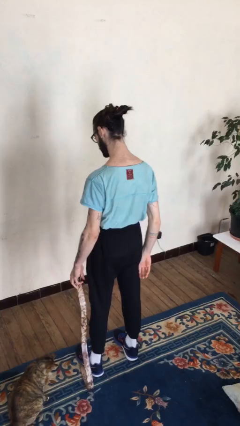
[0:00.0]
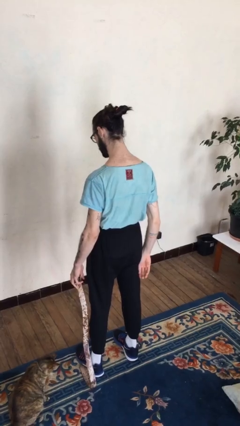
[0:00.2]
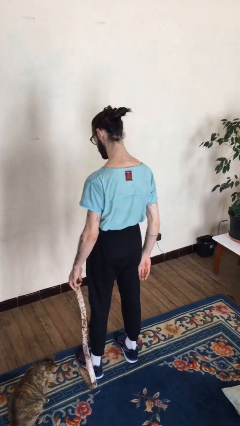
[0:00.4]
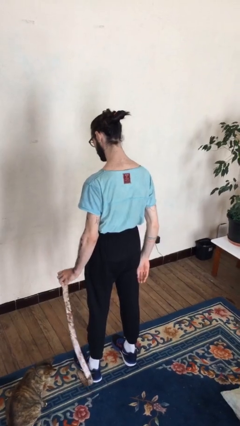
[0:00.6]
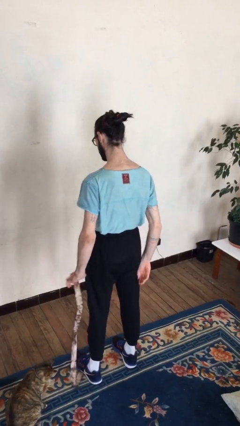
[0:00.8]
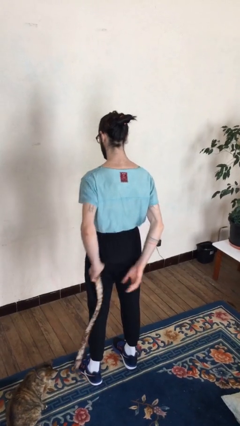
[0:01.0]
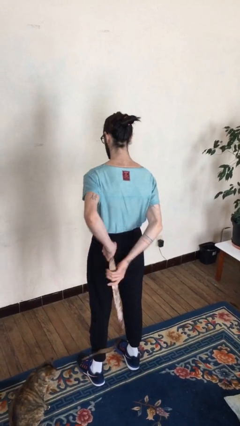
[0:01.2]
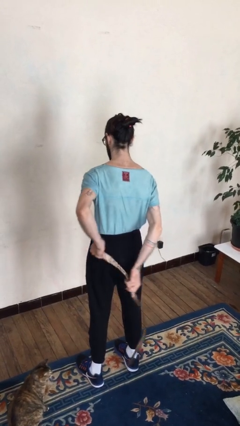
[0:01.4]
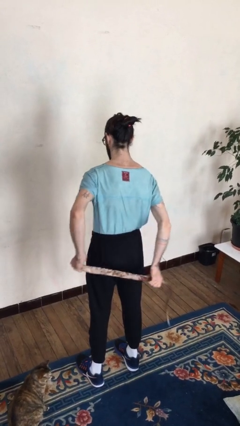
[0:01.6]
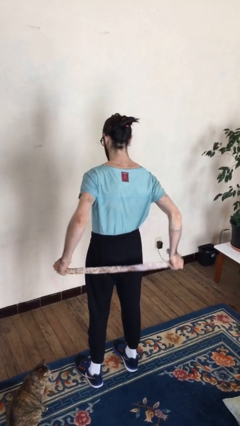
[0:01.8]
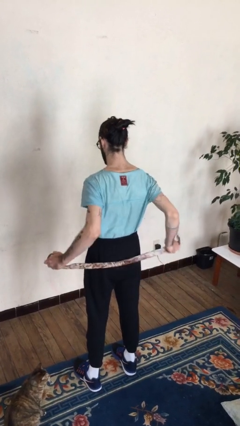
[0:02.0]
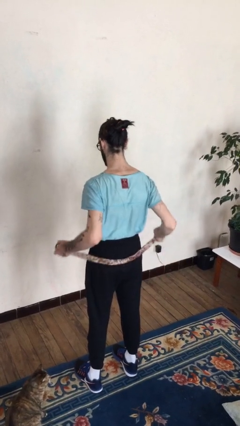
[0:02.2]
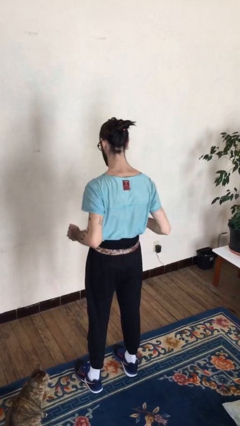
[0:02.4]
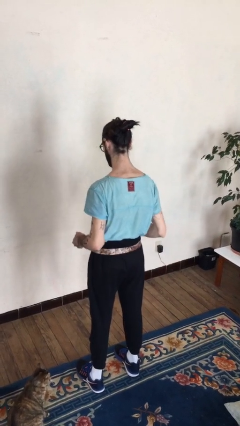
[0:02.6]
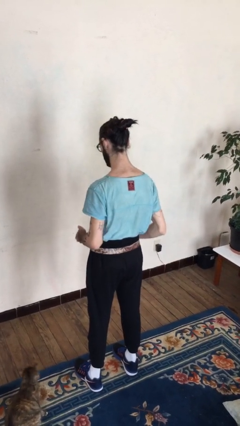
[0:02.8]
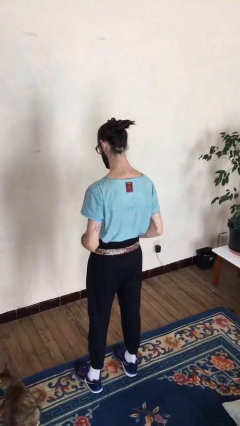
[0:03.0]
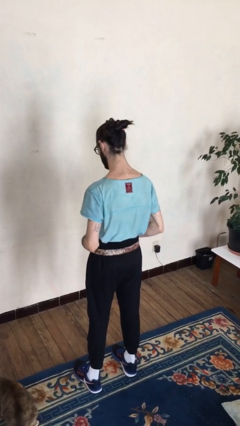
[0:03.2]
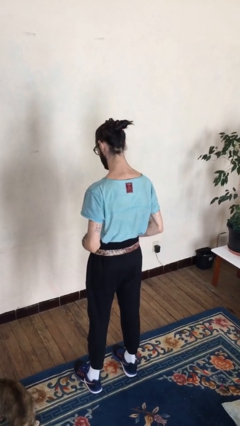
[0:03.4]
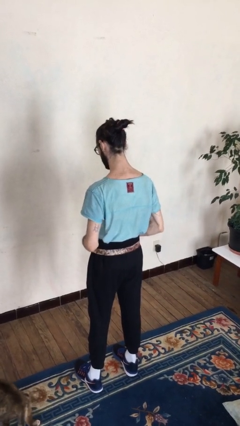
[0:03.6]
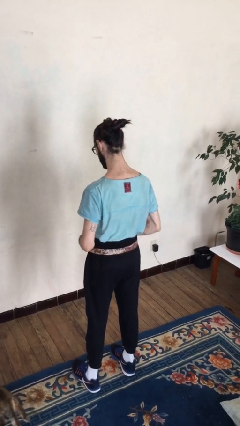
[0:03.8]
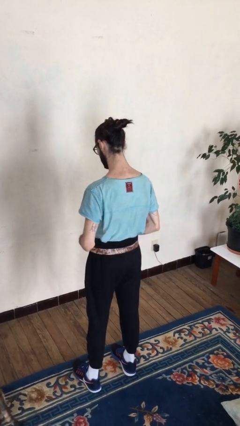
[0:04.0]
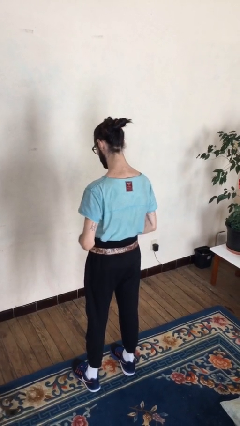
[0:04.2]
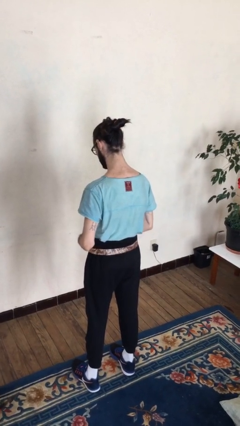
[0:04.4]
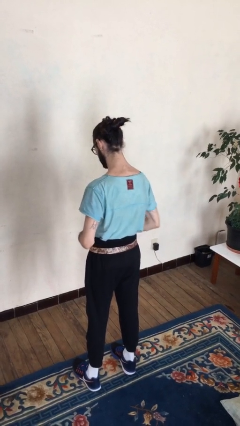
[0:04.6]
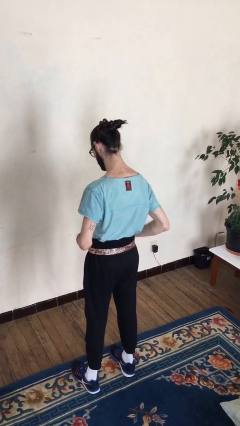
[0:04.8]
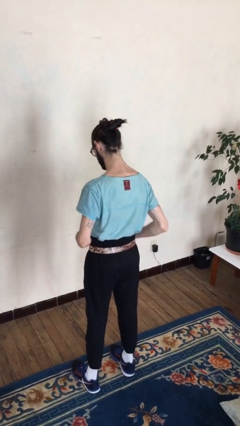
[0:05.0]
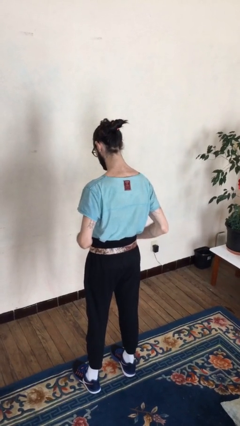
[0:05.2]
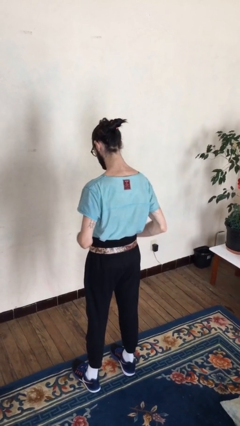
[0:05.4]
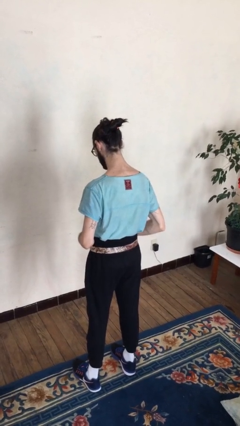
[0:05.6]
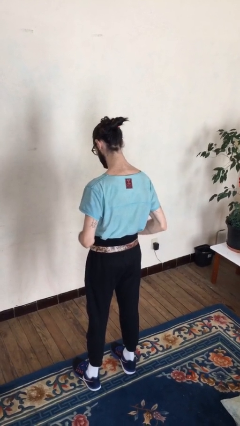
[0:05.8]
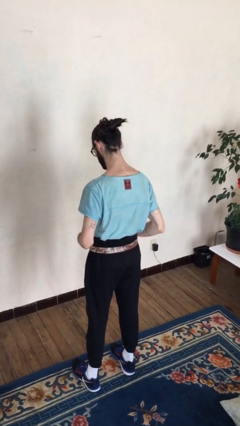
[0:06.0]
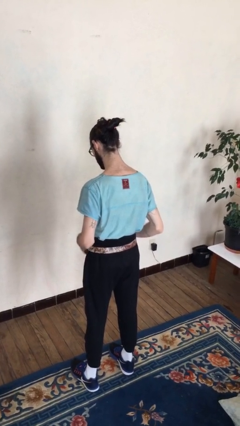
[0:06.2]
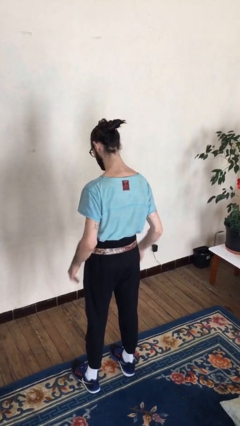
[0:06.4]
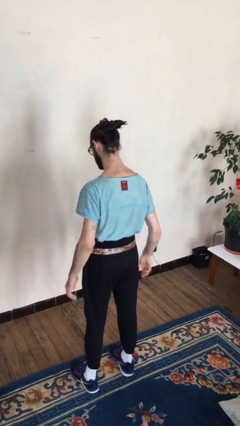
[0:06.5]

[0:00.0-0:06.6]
person puts on belt

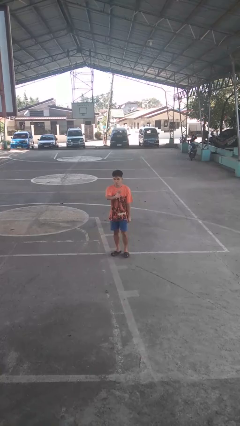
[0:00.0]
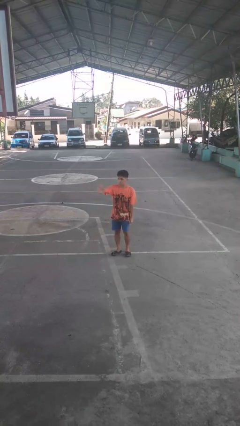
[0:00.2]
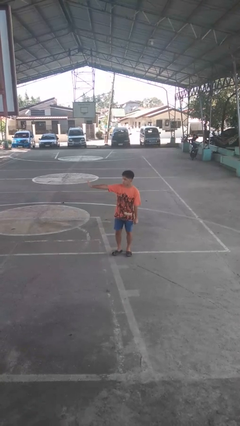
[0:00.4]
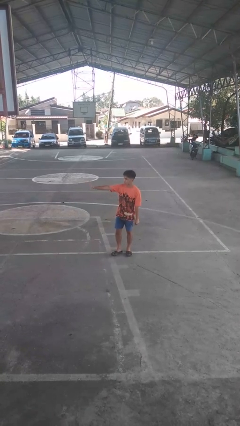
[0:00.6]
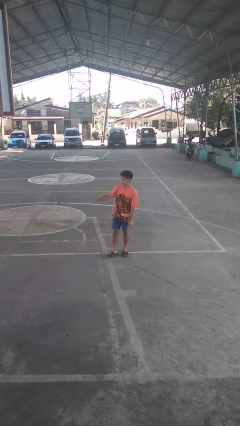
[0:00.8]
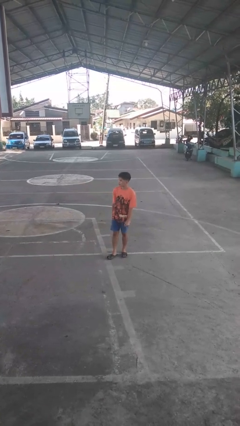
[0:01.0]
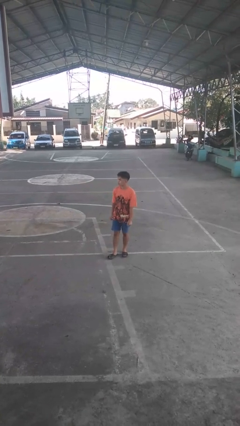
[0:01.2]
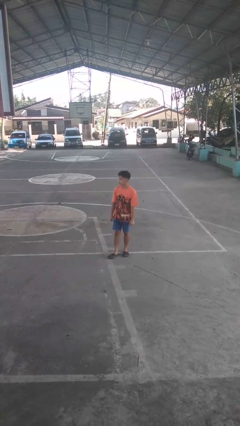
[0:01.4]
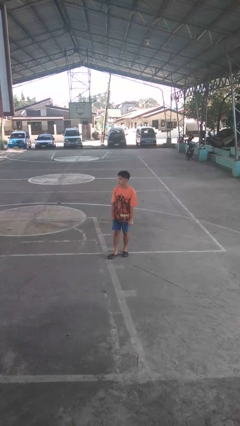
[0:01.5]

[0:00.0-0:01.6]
person gestures swipe right

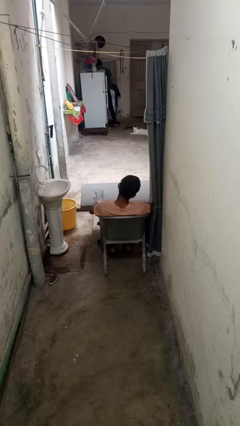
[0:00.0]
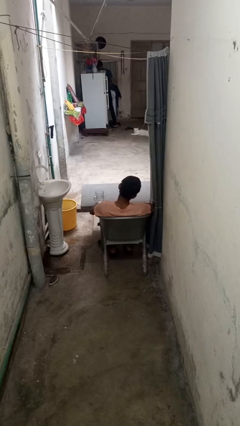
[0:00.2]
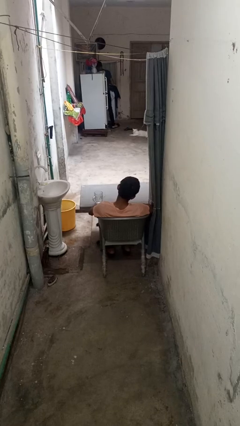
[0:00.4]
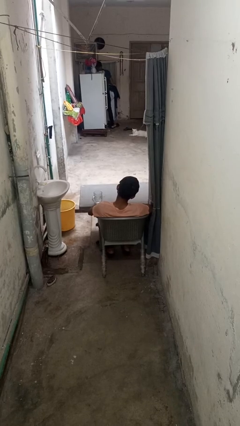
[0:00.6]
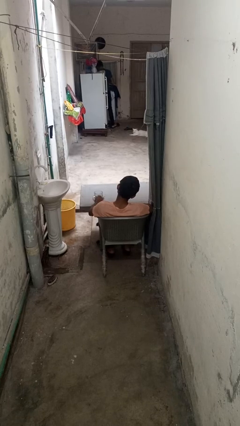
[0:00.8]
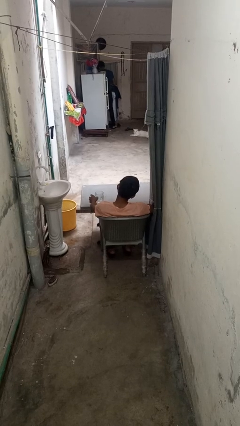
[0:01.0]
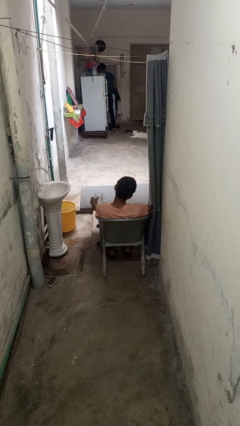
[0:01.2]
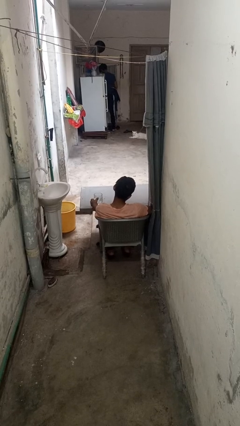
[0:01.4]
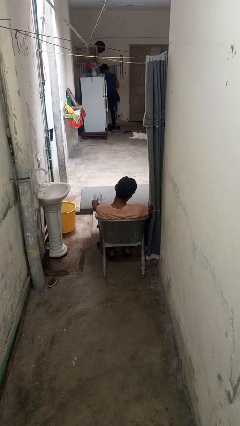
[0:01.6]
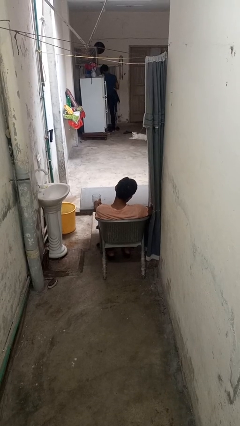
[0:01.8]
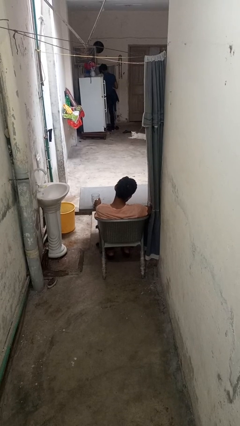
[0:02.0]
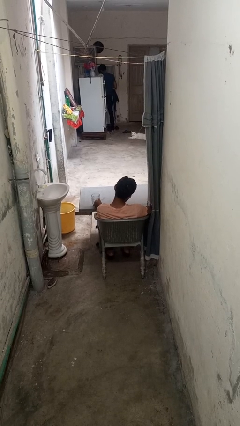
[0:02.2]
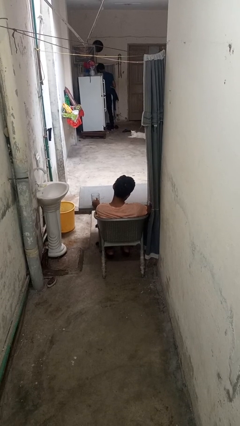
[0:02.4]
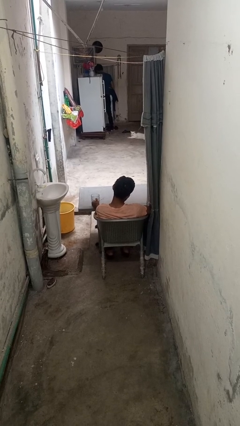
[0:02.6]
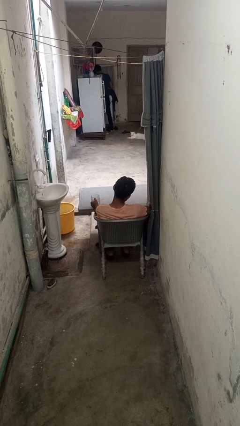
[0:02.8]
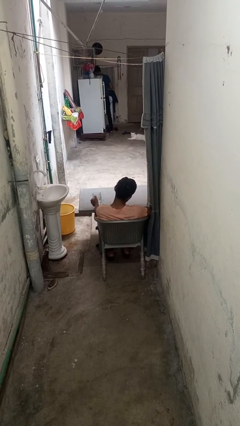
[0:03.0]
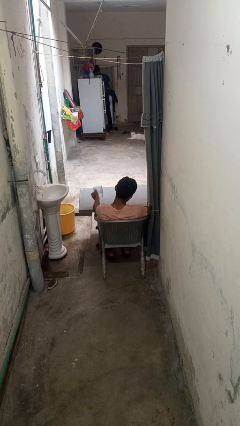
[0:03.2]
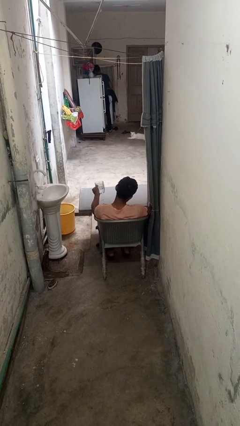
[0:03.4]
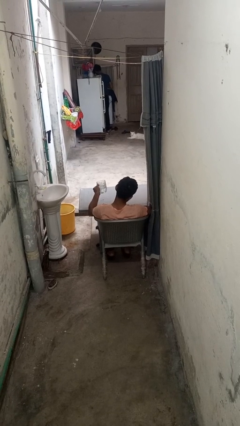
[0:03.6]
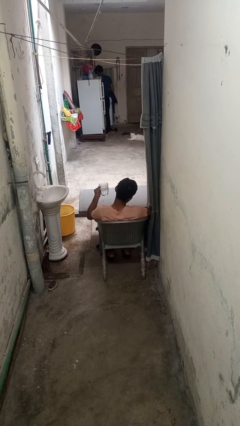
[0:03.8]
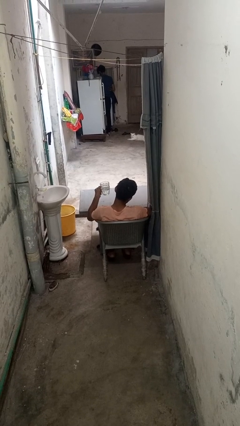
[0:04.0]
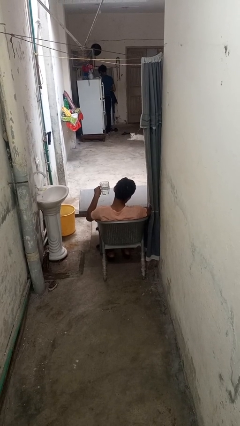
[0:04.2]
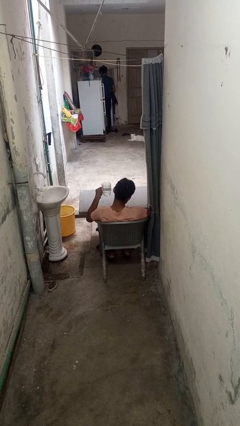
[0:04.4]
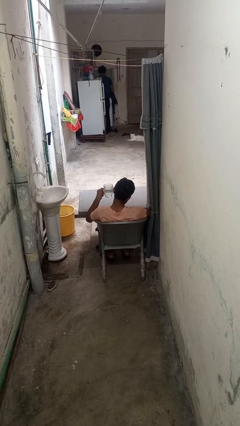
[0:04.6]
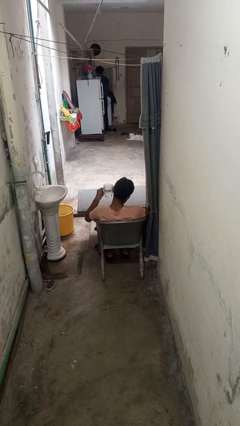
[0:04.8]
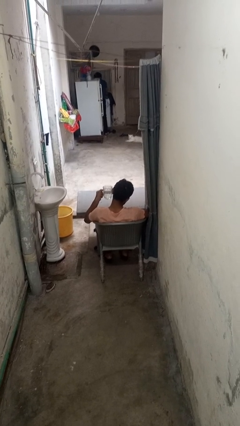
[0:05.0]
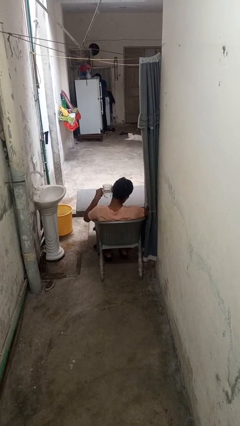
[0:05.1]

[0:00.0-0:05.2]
person picks up object from table

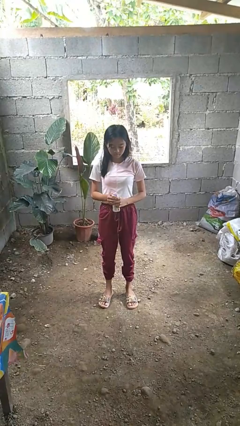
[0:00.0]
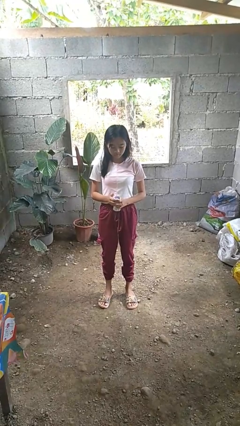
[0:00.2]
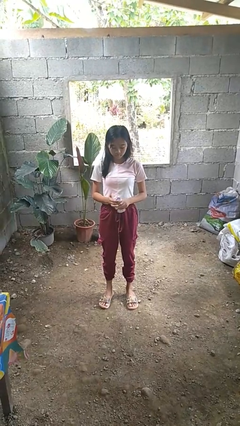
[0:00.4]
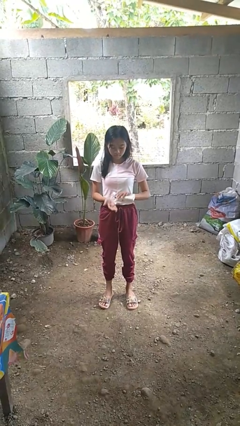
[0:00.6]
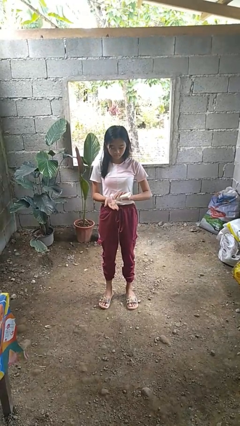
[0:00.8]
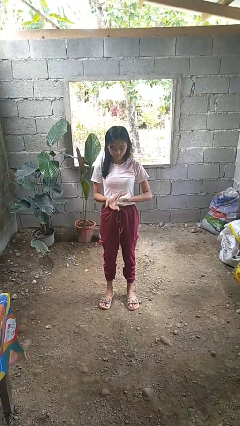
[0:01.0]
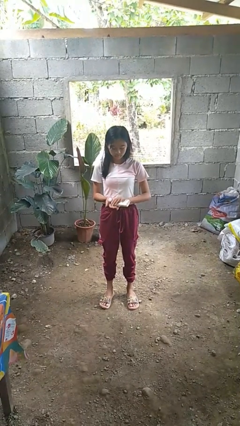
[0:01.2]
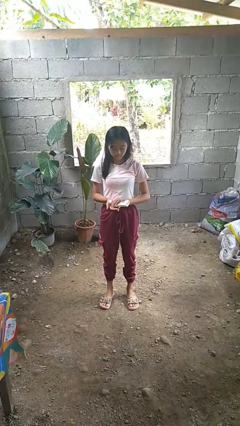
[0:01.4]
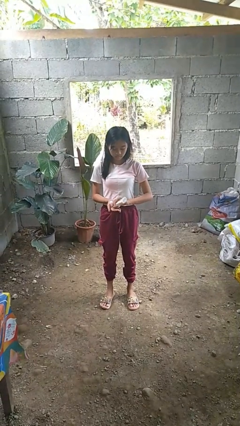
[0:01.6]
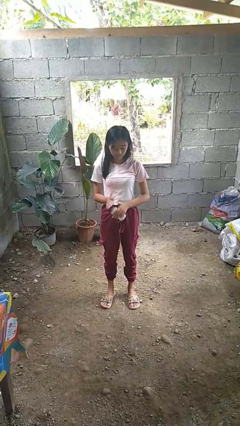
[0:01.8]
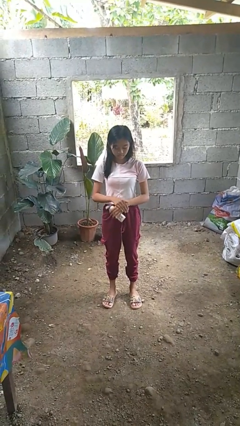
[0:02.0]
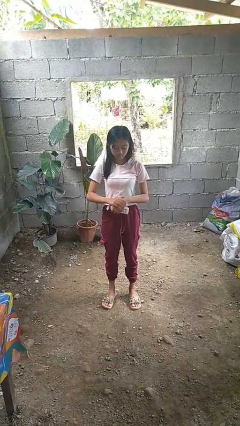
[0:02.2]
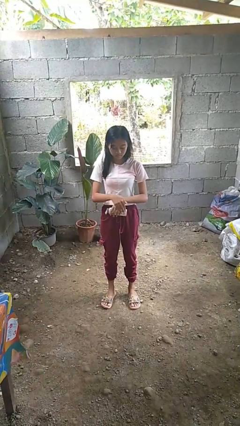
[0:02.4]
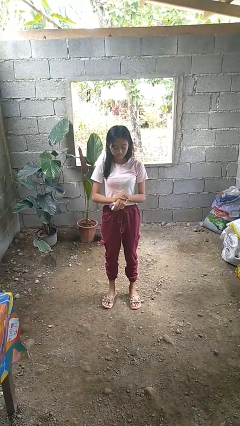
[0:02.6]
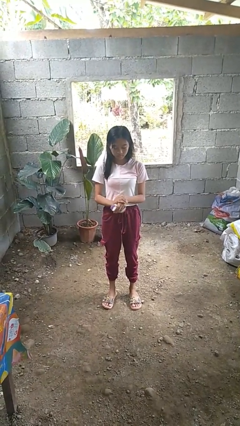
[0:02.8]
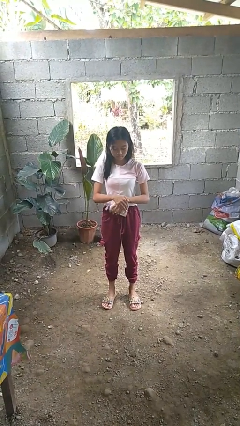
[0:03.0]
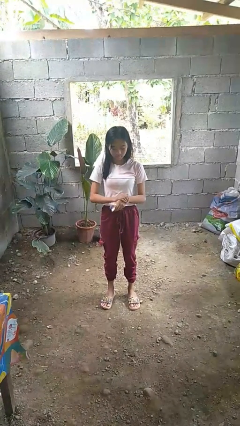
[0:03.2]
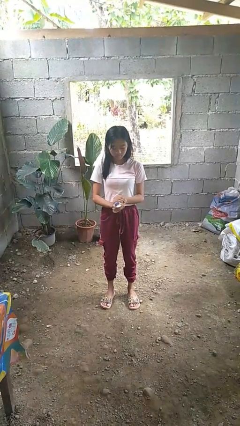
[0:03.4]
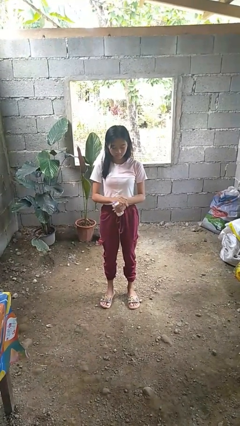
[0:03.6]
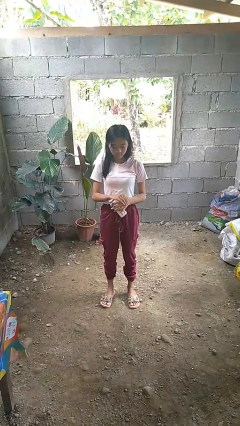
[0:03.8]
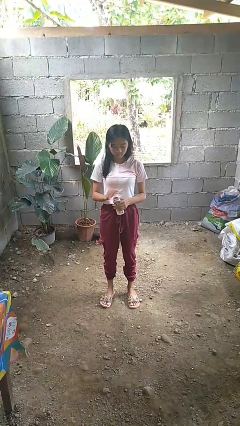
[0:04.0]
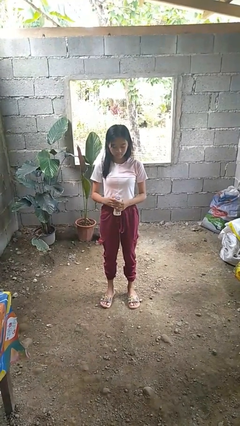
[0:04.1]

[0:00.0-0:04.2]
person applies sunscreen
